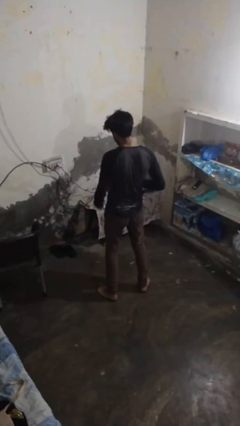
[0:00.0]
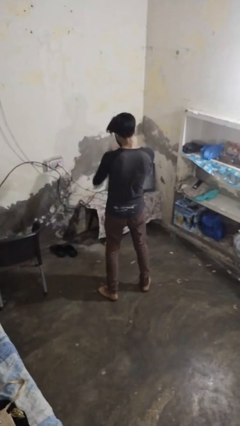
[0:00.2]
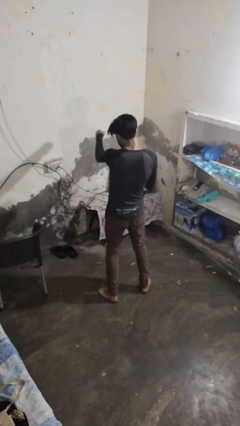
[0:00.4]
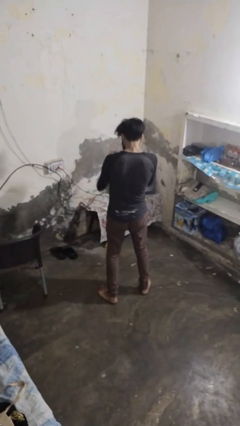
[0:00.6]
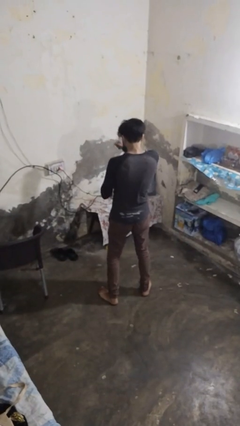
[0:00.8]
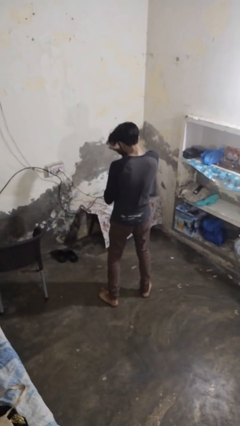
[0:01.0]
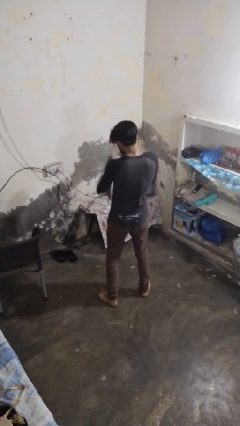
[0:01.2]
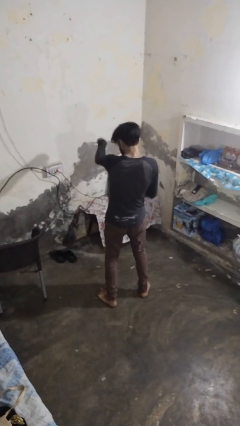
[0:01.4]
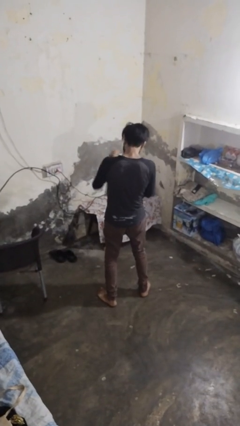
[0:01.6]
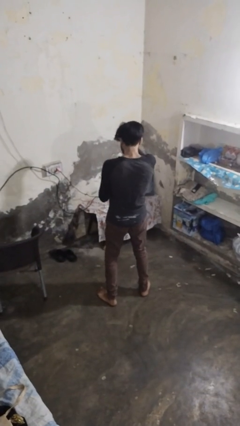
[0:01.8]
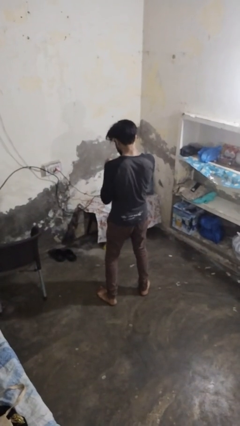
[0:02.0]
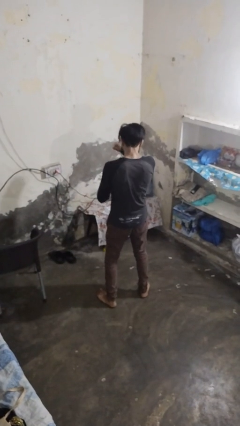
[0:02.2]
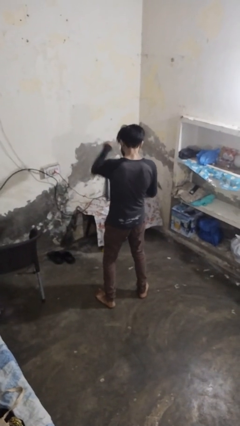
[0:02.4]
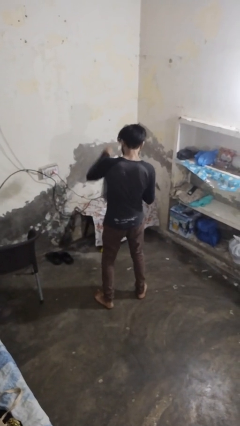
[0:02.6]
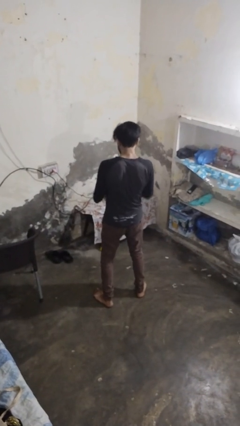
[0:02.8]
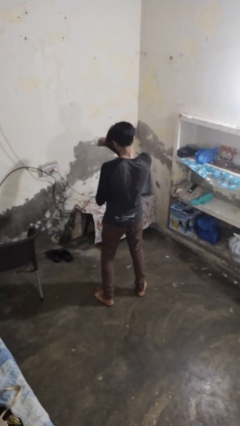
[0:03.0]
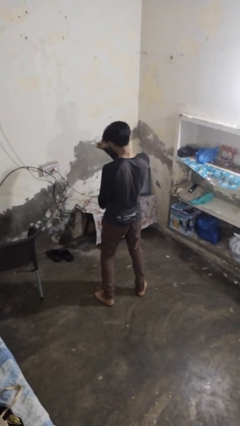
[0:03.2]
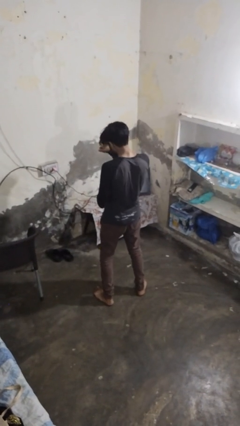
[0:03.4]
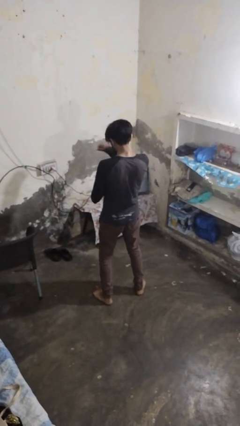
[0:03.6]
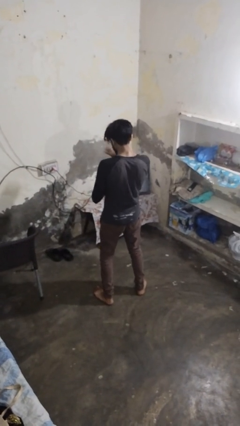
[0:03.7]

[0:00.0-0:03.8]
person punches

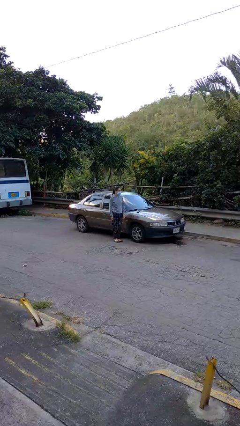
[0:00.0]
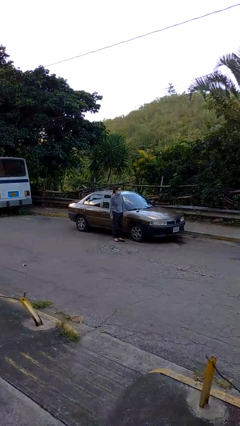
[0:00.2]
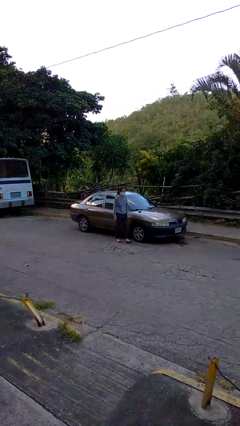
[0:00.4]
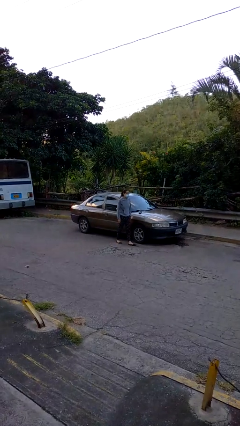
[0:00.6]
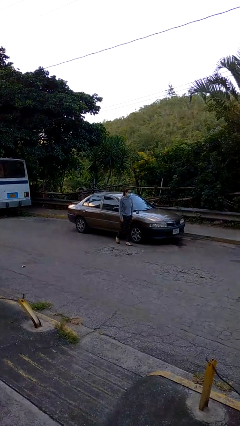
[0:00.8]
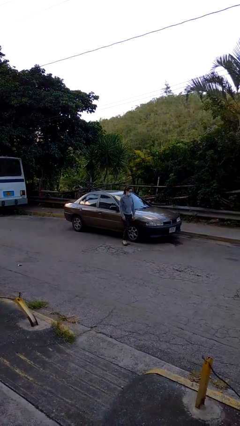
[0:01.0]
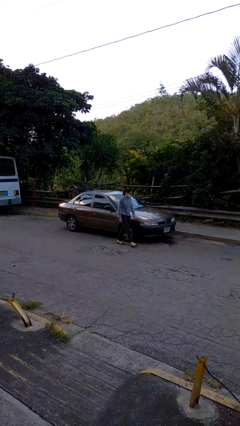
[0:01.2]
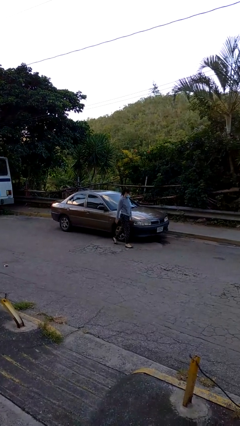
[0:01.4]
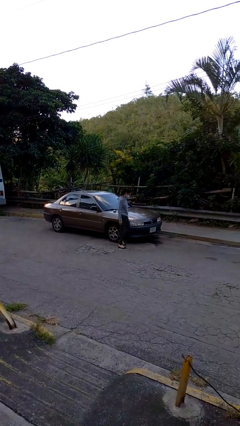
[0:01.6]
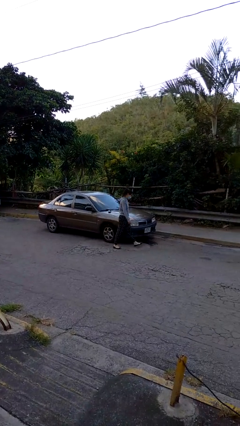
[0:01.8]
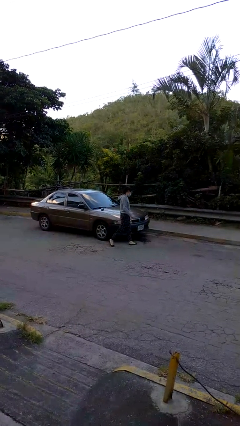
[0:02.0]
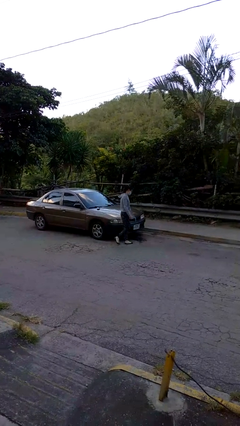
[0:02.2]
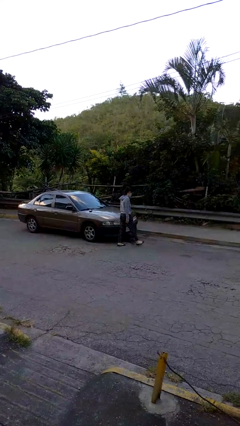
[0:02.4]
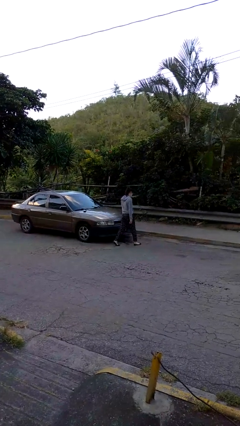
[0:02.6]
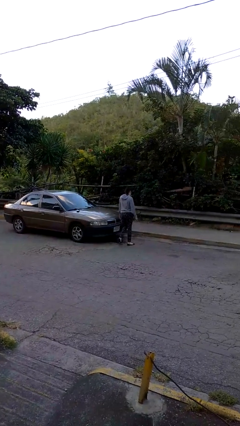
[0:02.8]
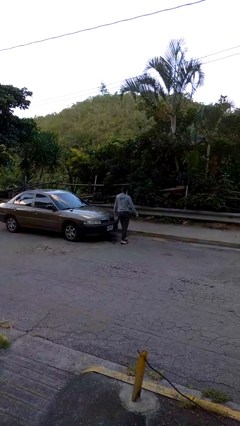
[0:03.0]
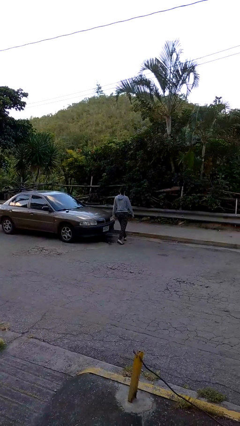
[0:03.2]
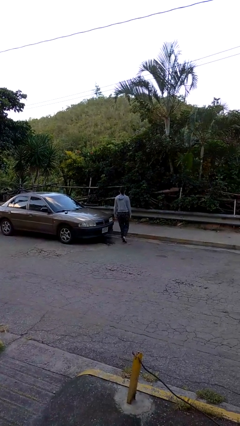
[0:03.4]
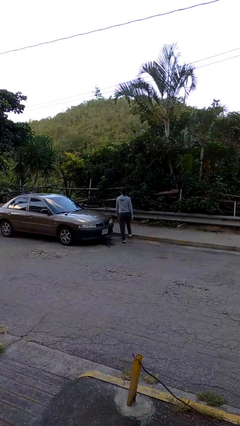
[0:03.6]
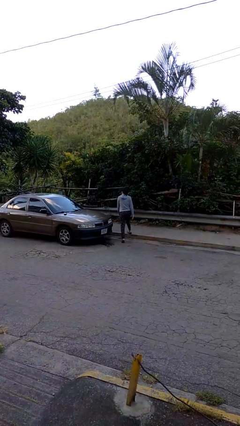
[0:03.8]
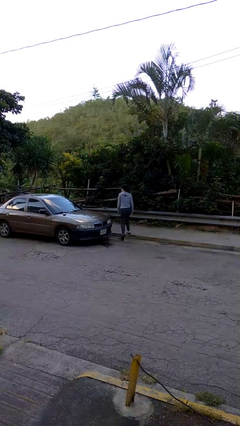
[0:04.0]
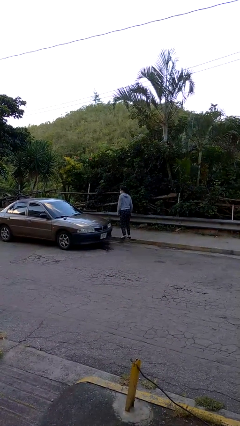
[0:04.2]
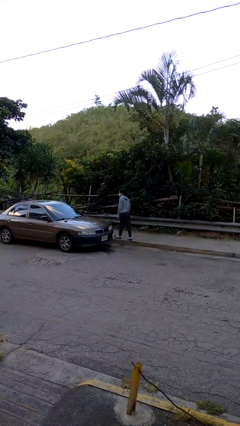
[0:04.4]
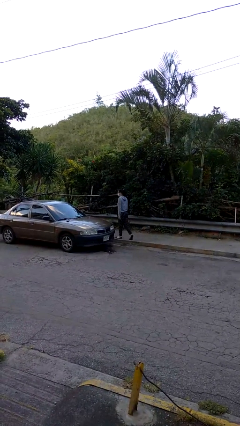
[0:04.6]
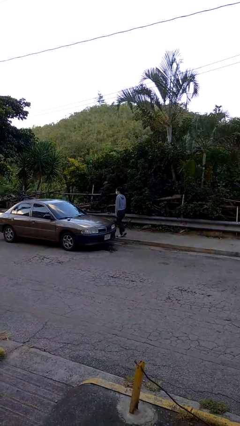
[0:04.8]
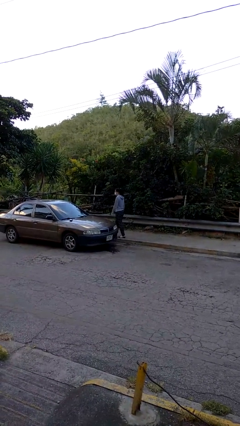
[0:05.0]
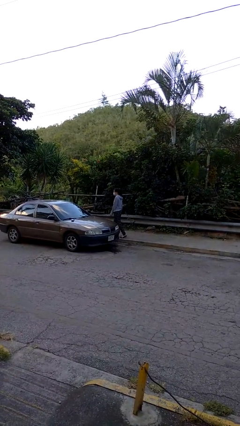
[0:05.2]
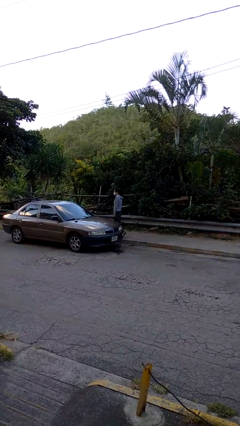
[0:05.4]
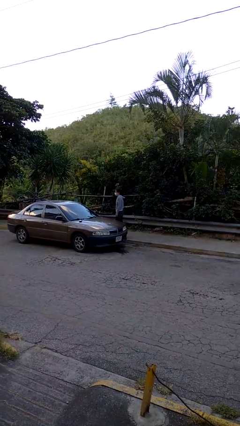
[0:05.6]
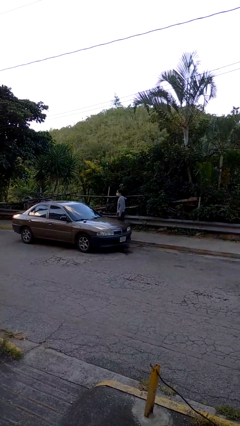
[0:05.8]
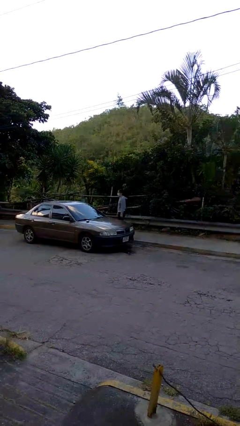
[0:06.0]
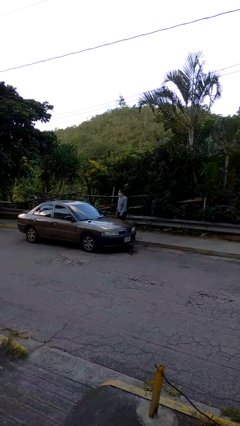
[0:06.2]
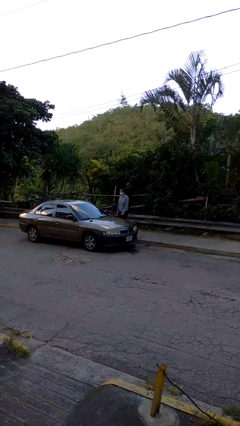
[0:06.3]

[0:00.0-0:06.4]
person walks around car

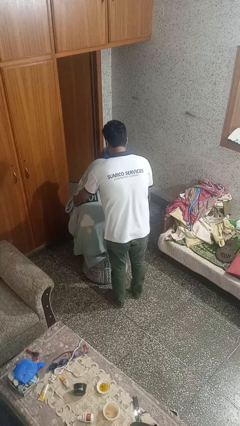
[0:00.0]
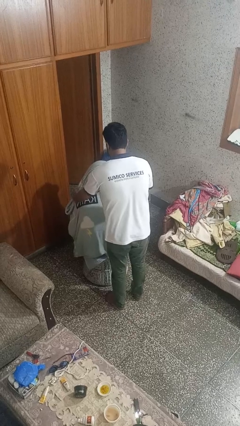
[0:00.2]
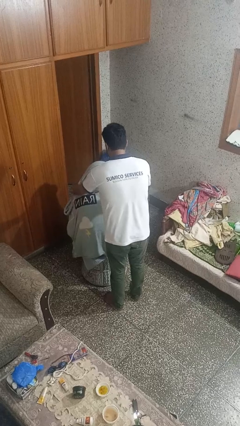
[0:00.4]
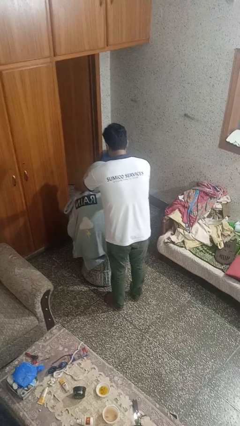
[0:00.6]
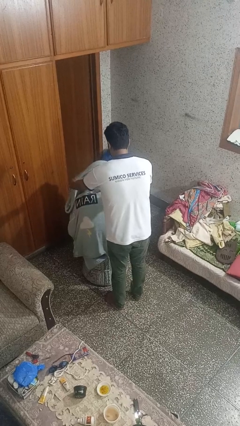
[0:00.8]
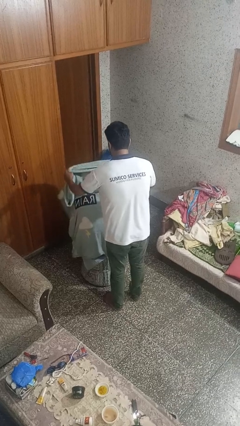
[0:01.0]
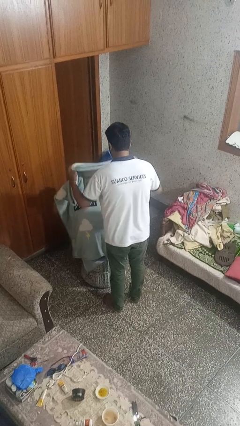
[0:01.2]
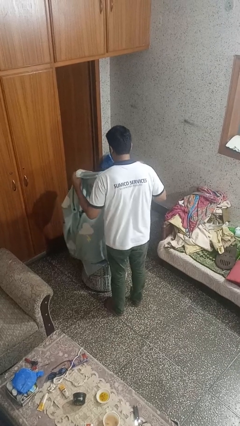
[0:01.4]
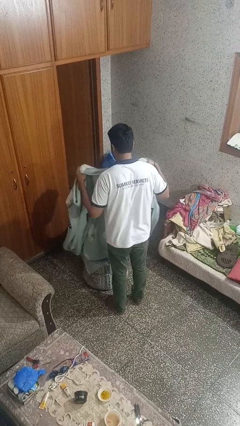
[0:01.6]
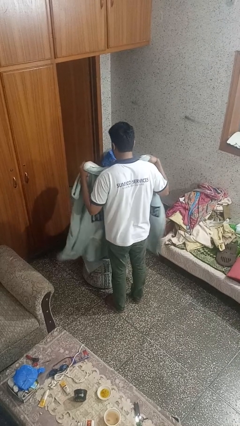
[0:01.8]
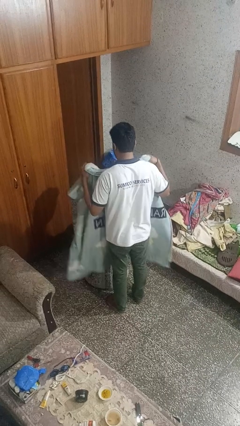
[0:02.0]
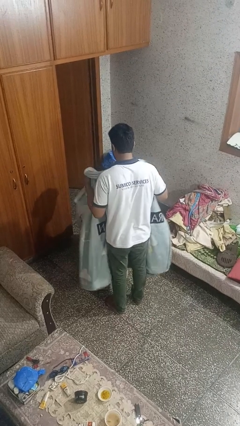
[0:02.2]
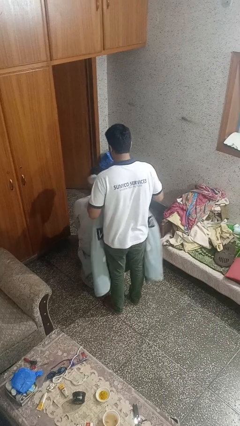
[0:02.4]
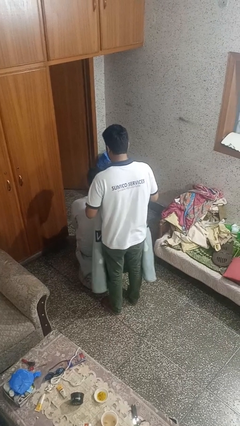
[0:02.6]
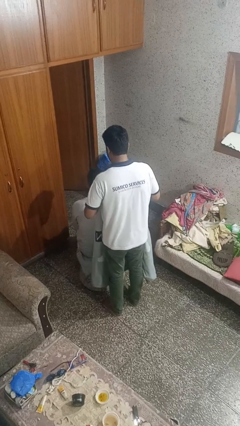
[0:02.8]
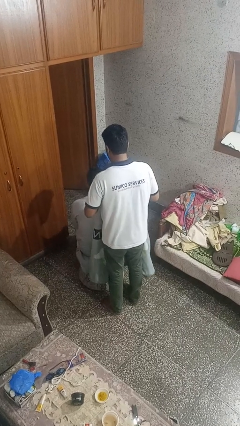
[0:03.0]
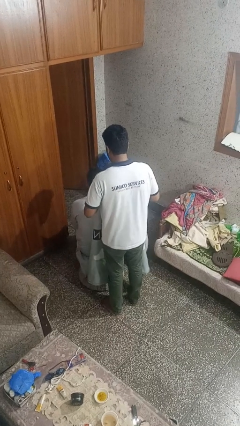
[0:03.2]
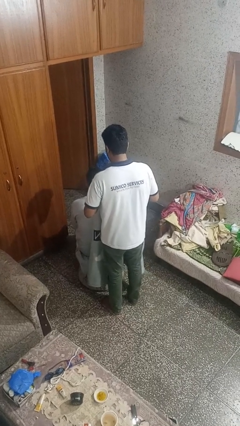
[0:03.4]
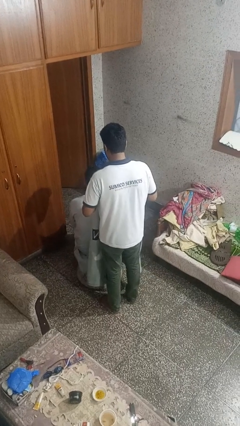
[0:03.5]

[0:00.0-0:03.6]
person uncovers friend with blanket

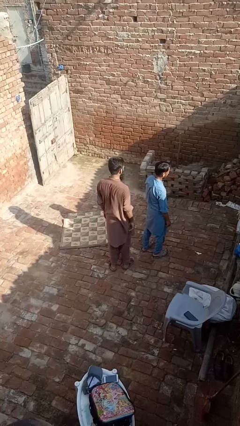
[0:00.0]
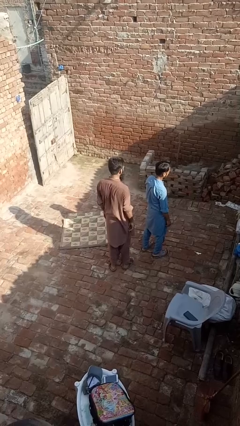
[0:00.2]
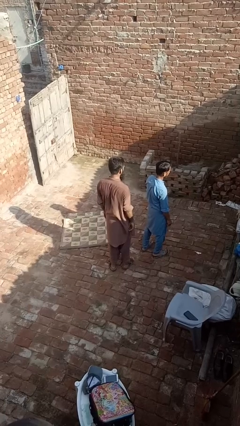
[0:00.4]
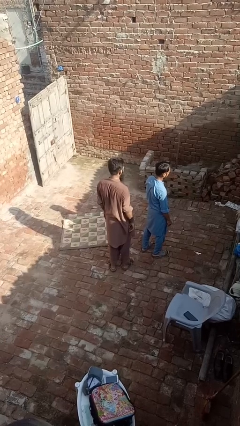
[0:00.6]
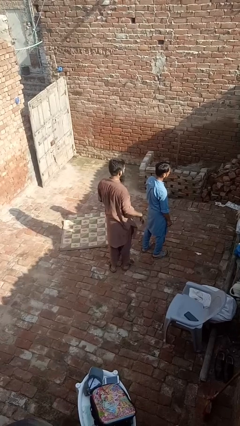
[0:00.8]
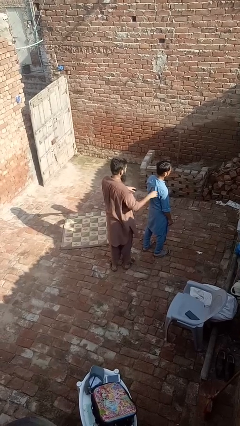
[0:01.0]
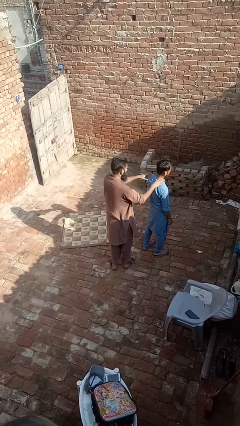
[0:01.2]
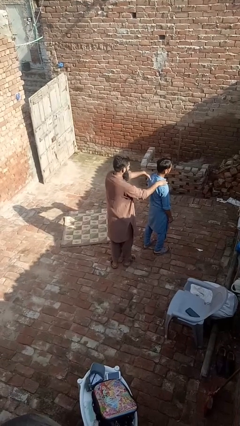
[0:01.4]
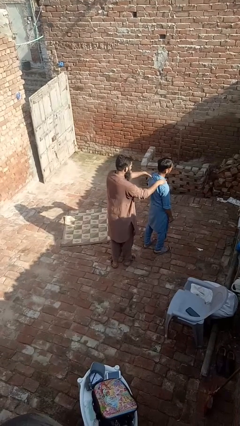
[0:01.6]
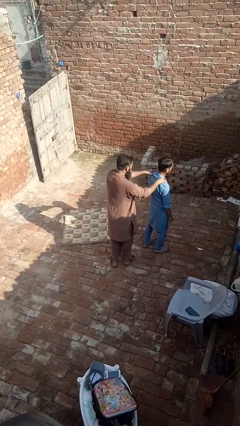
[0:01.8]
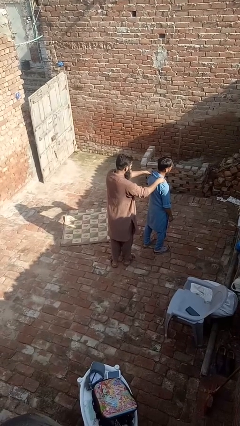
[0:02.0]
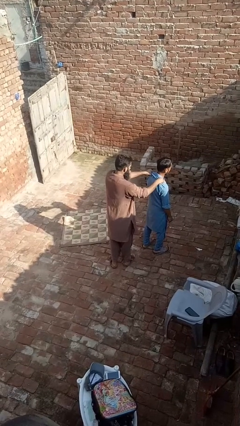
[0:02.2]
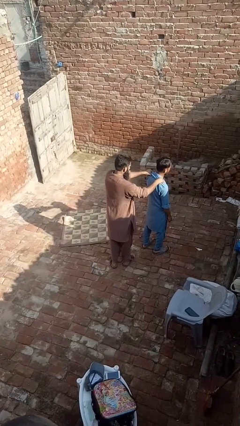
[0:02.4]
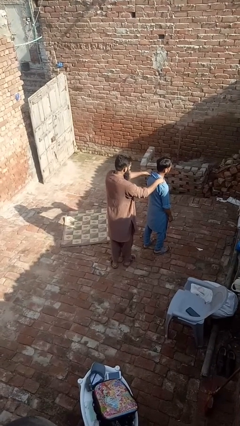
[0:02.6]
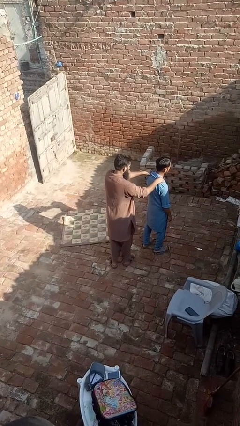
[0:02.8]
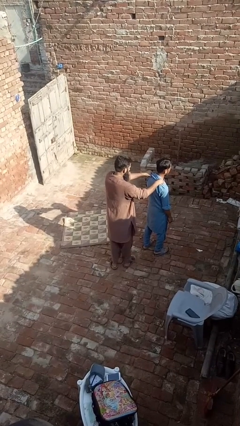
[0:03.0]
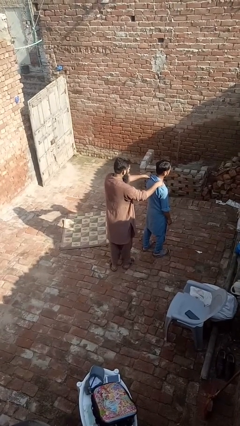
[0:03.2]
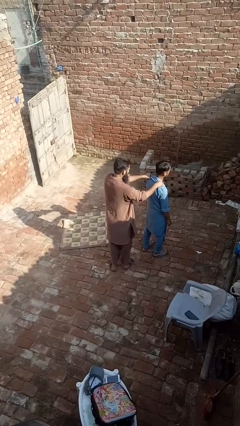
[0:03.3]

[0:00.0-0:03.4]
person grabs person by shoulder

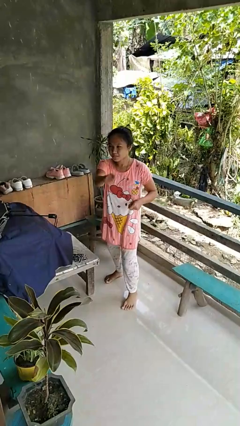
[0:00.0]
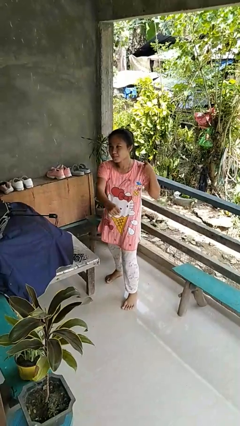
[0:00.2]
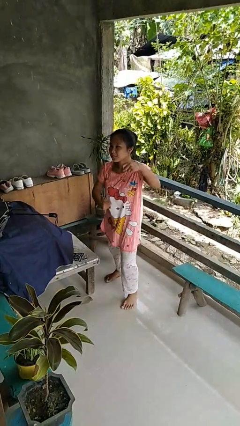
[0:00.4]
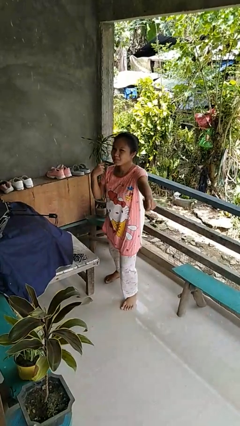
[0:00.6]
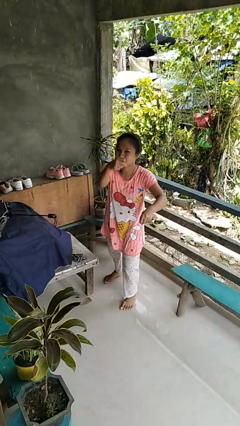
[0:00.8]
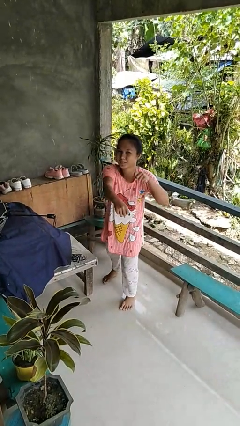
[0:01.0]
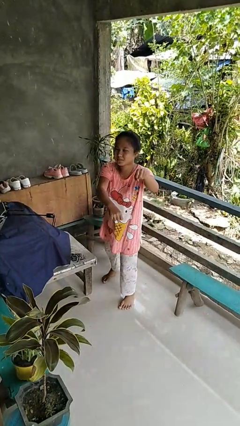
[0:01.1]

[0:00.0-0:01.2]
person karate chop
